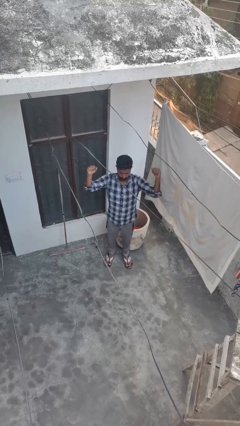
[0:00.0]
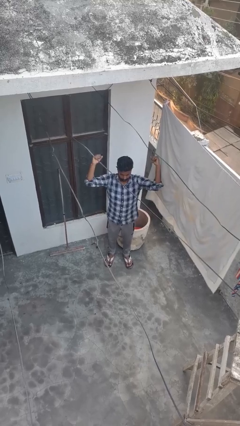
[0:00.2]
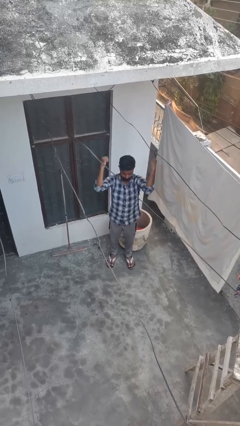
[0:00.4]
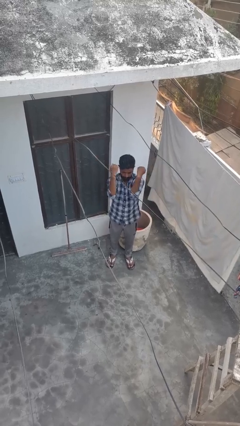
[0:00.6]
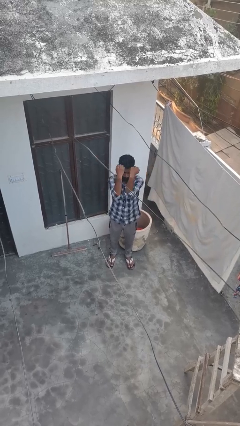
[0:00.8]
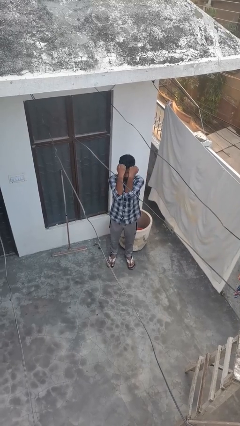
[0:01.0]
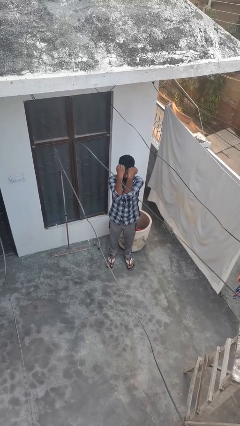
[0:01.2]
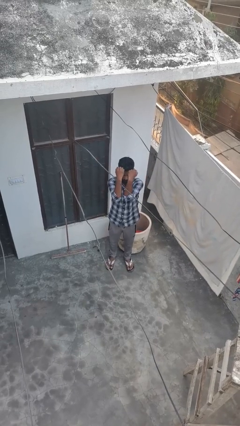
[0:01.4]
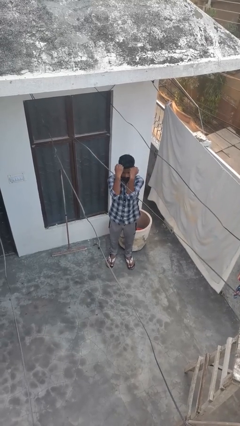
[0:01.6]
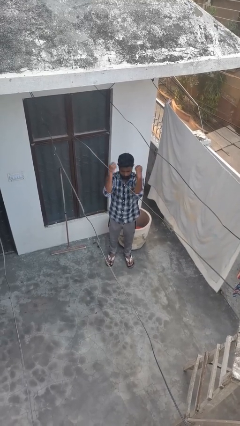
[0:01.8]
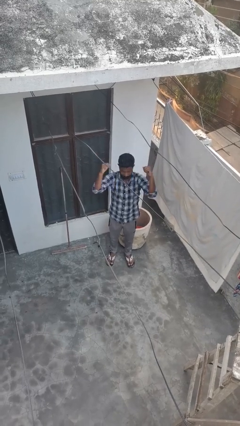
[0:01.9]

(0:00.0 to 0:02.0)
person gestures zoom in

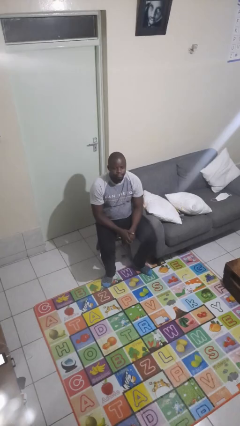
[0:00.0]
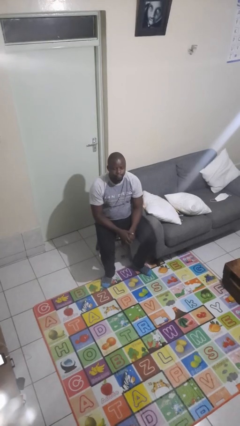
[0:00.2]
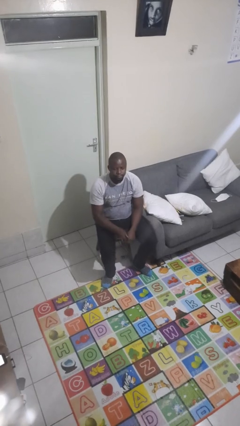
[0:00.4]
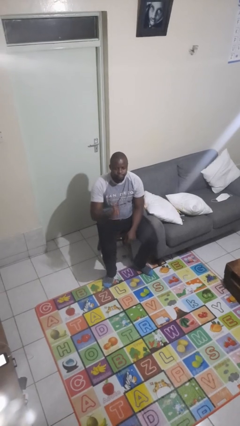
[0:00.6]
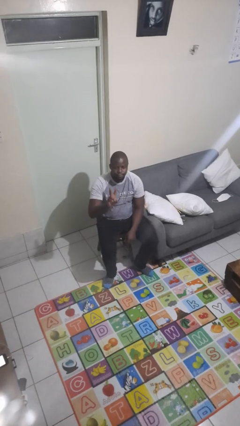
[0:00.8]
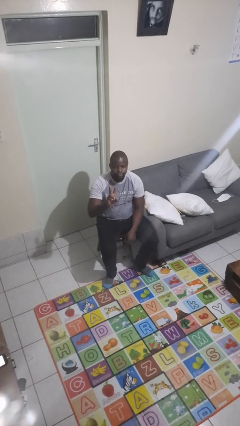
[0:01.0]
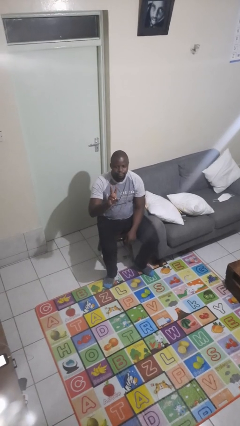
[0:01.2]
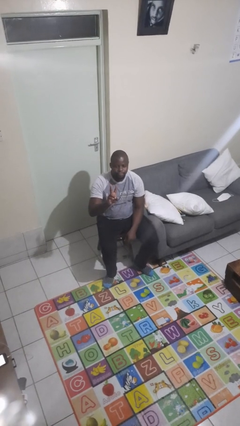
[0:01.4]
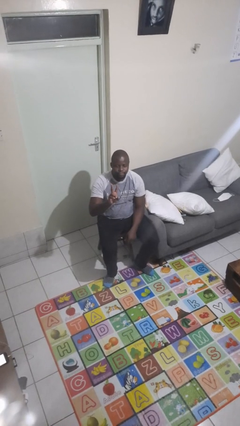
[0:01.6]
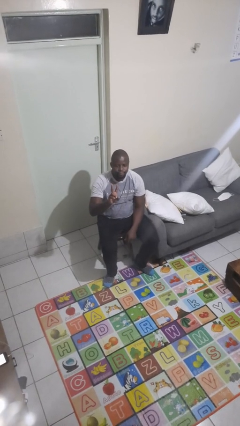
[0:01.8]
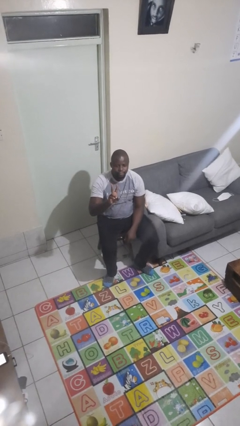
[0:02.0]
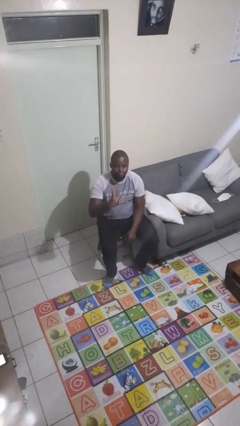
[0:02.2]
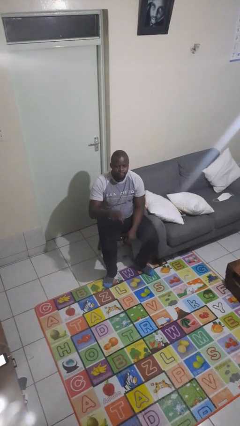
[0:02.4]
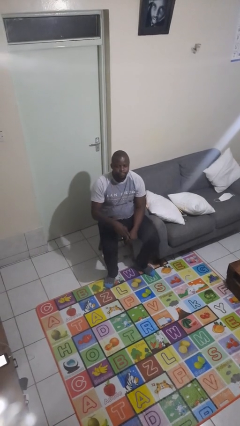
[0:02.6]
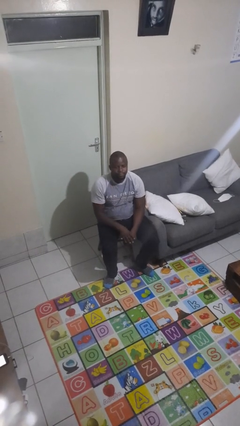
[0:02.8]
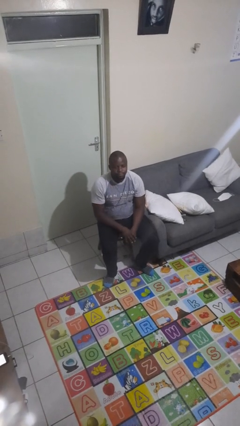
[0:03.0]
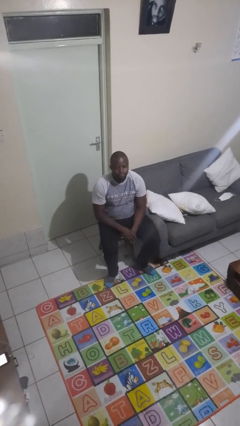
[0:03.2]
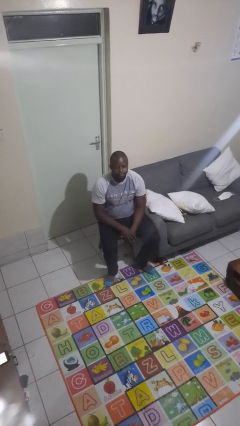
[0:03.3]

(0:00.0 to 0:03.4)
person gestures peace

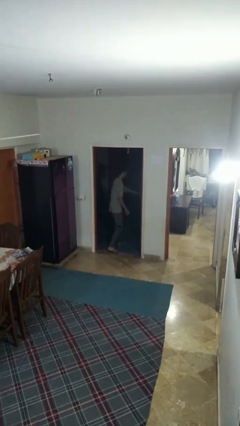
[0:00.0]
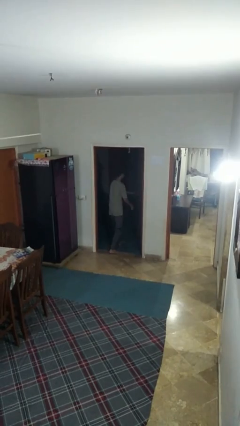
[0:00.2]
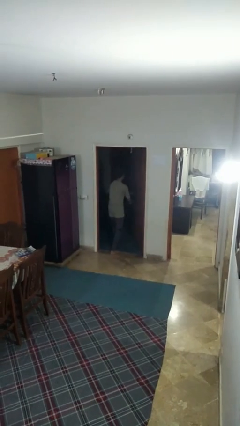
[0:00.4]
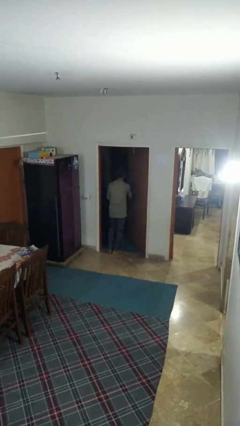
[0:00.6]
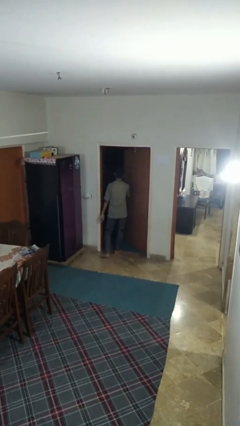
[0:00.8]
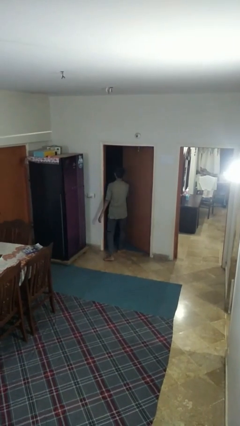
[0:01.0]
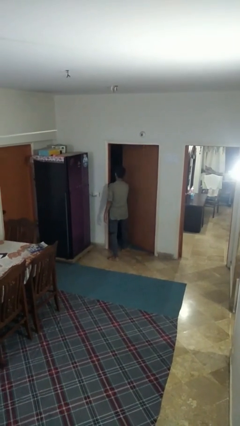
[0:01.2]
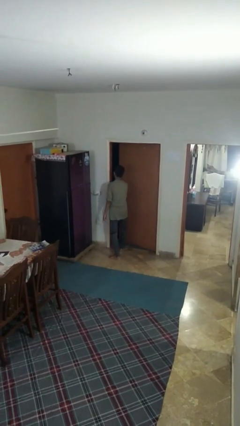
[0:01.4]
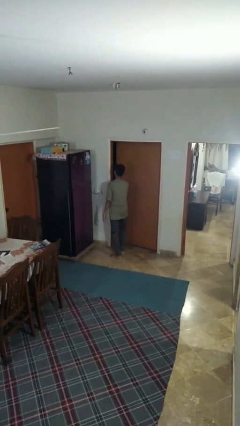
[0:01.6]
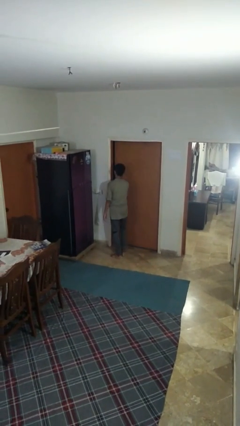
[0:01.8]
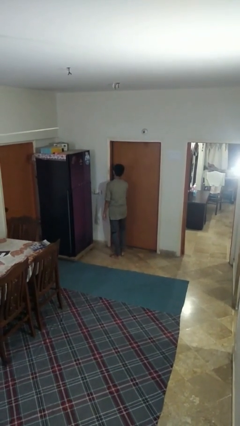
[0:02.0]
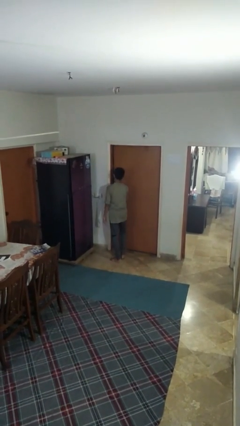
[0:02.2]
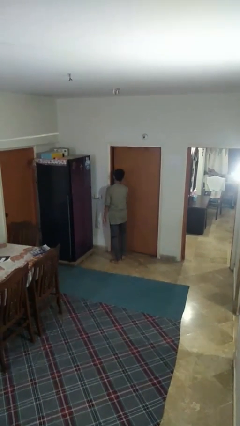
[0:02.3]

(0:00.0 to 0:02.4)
person closes facility door

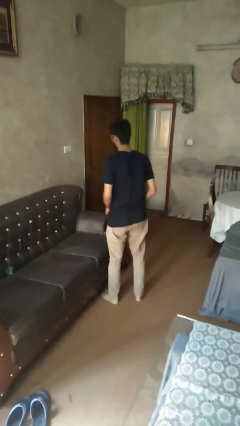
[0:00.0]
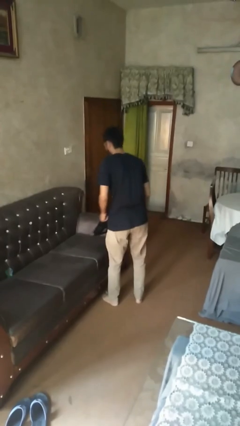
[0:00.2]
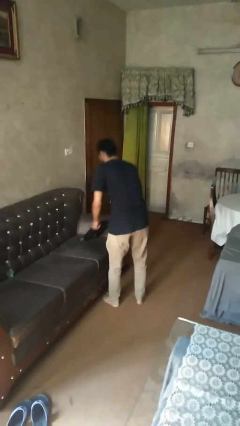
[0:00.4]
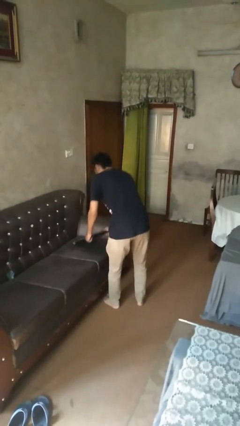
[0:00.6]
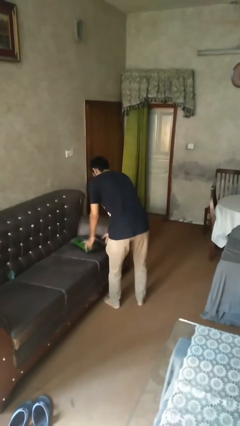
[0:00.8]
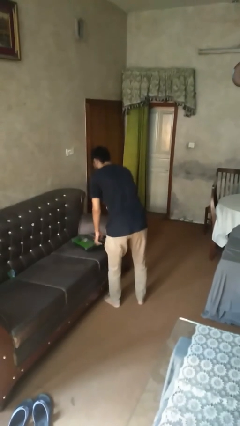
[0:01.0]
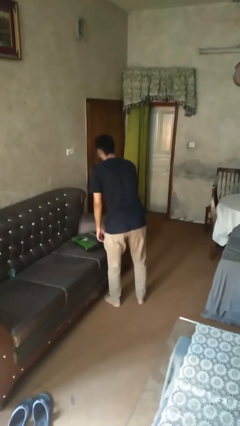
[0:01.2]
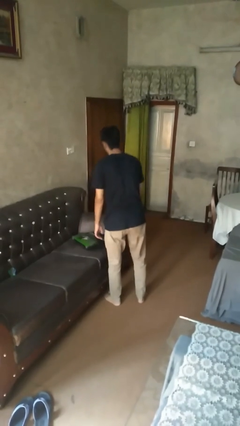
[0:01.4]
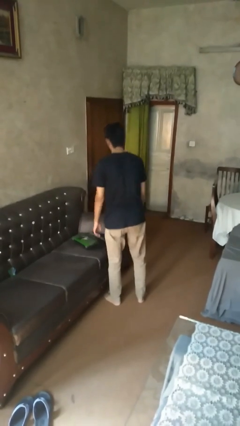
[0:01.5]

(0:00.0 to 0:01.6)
person puts down object on couch

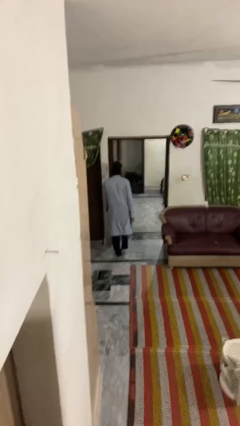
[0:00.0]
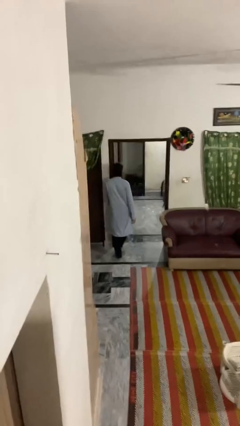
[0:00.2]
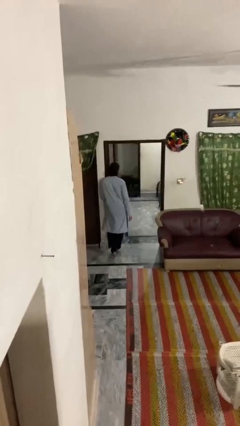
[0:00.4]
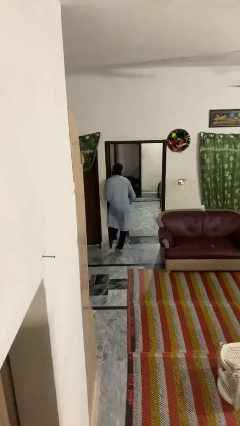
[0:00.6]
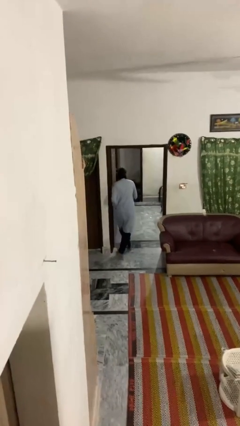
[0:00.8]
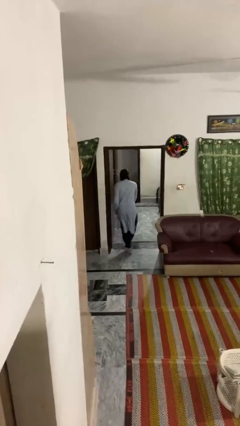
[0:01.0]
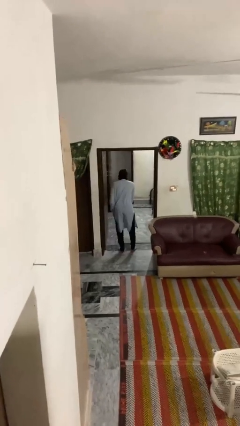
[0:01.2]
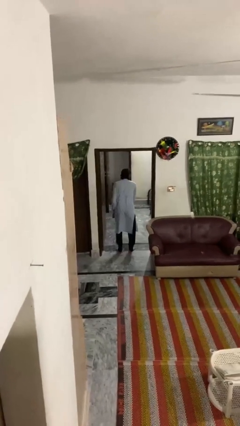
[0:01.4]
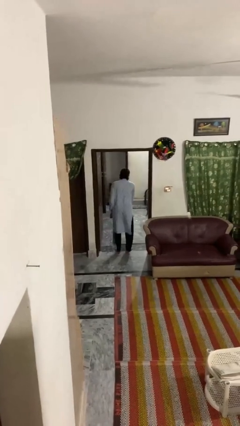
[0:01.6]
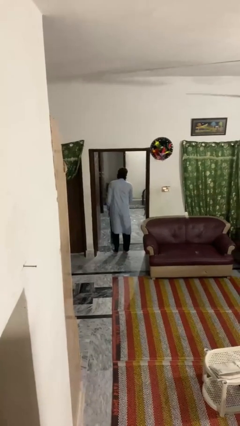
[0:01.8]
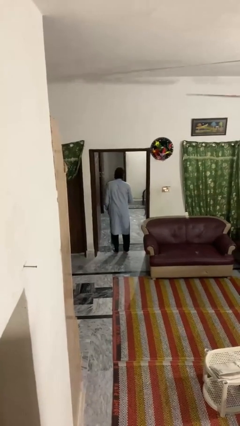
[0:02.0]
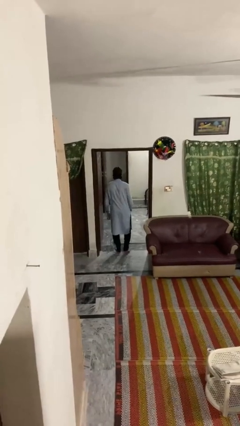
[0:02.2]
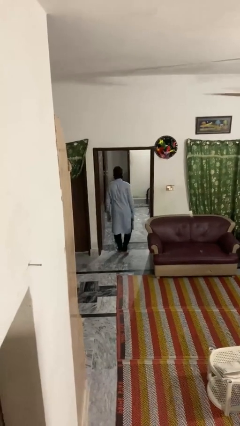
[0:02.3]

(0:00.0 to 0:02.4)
person bumps into wall

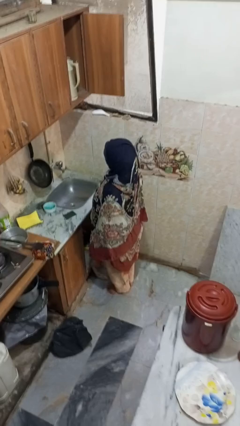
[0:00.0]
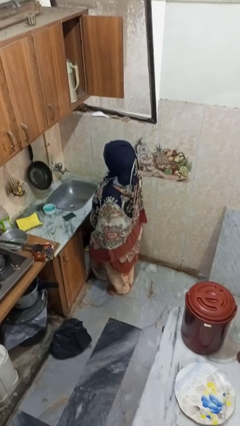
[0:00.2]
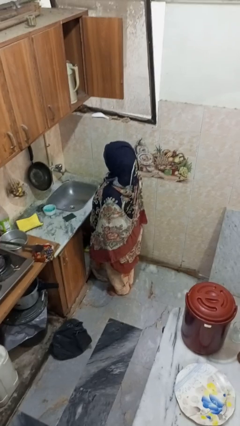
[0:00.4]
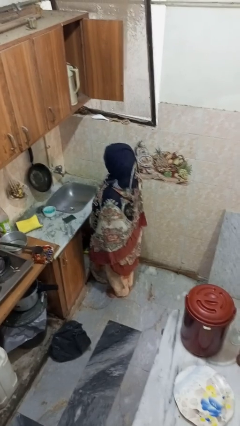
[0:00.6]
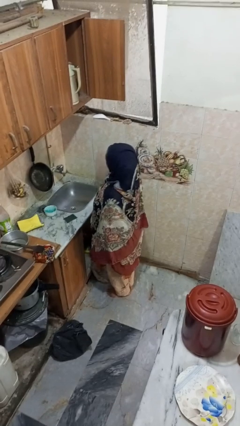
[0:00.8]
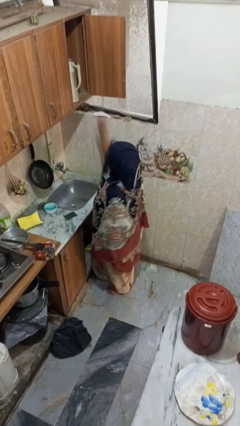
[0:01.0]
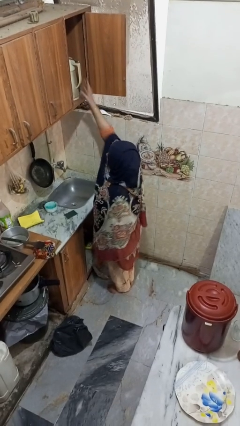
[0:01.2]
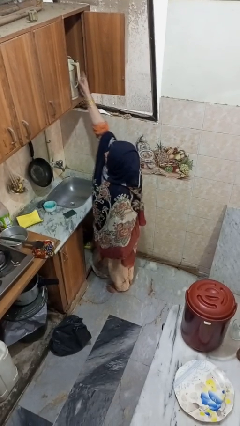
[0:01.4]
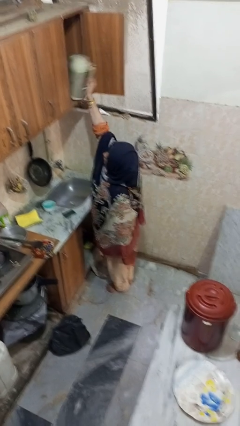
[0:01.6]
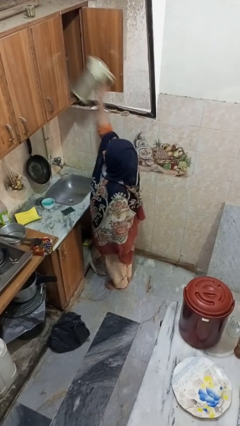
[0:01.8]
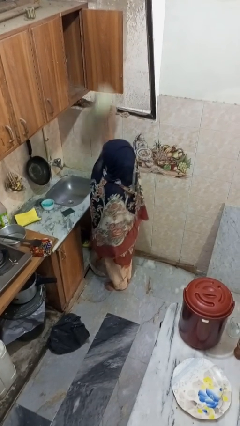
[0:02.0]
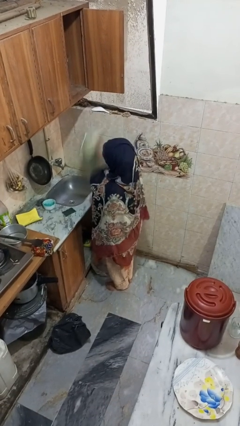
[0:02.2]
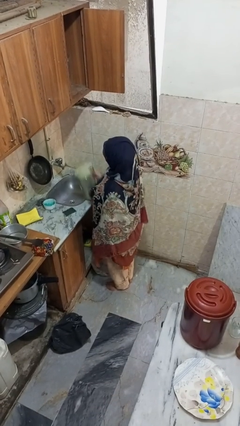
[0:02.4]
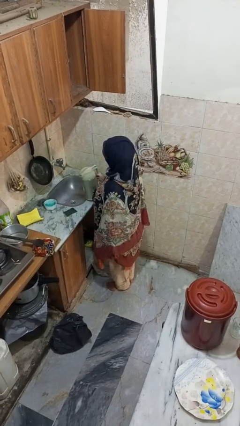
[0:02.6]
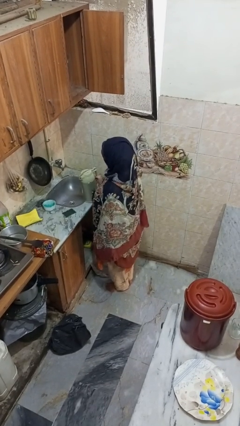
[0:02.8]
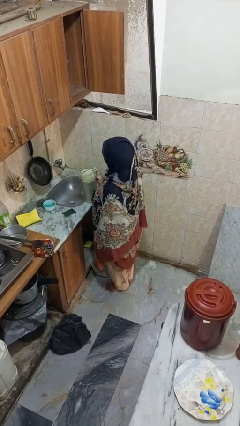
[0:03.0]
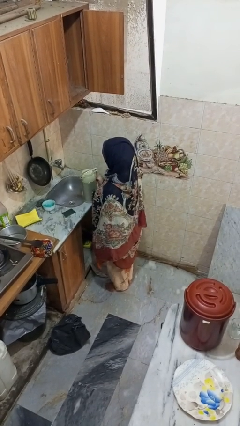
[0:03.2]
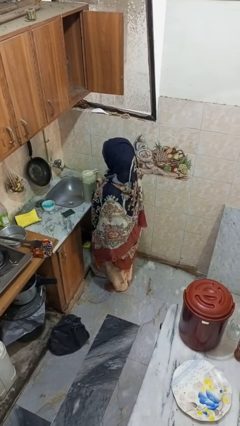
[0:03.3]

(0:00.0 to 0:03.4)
person puts object in cabinet

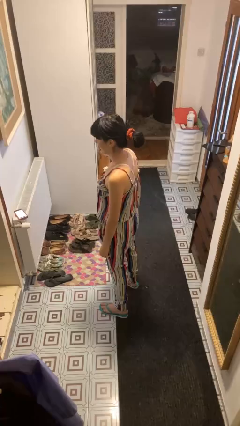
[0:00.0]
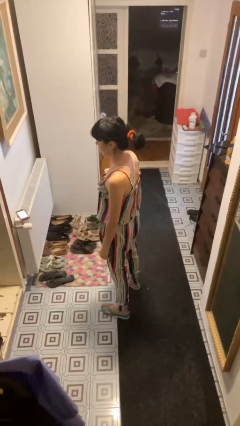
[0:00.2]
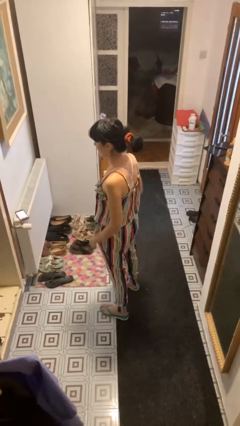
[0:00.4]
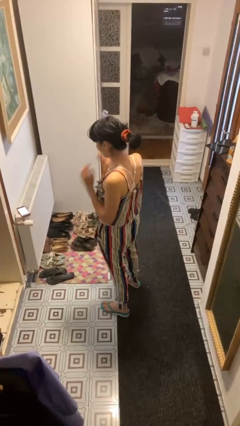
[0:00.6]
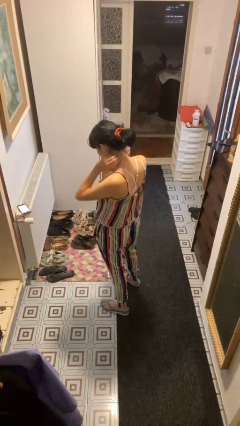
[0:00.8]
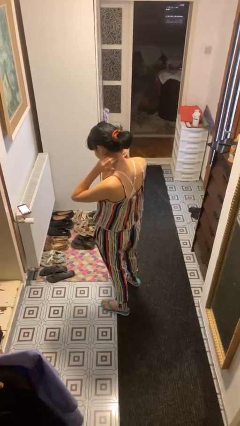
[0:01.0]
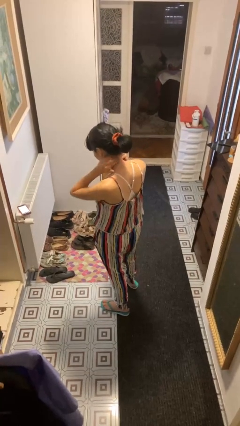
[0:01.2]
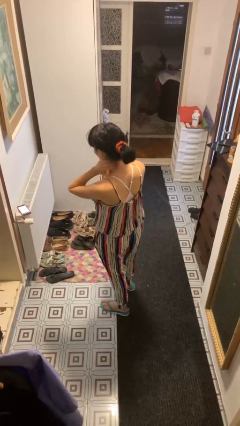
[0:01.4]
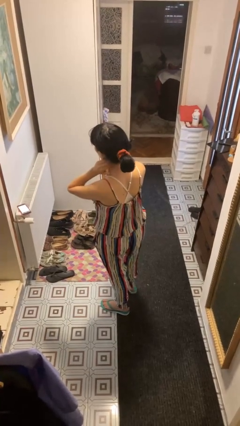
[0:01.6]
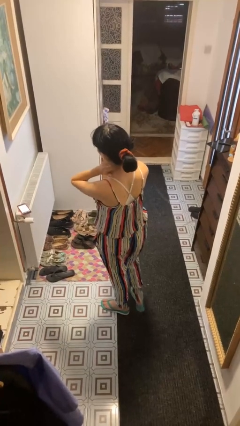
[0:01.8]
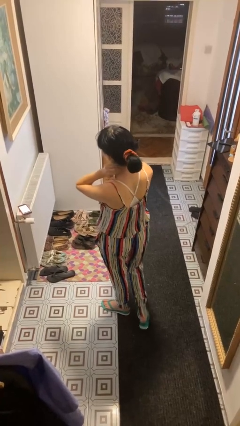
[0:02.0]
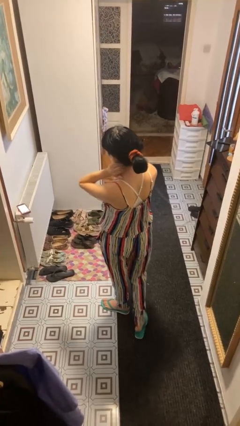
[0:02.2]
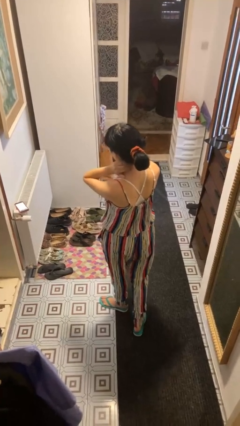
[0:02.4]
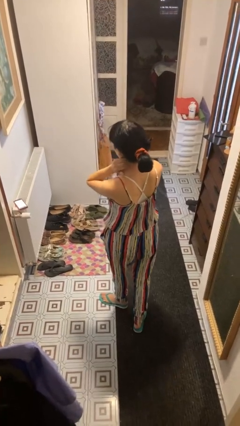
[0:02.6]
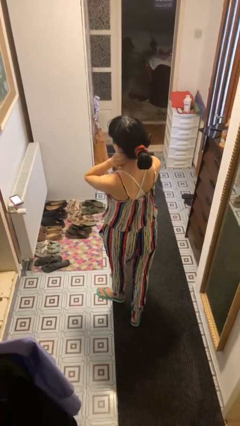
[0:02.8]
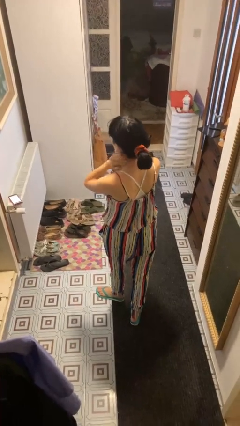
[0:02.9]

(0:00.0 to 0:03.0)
person rubs neck